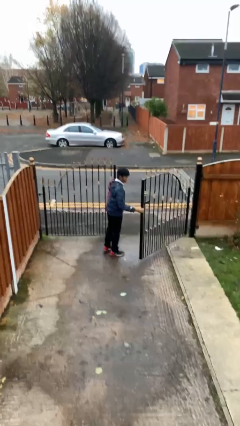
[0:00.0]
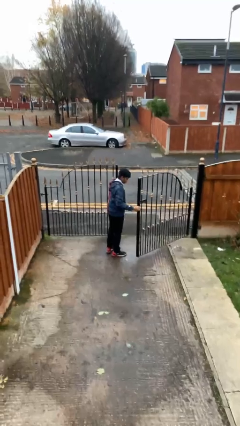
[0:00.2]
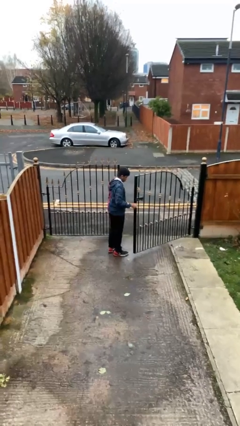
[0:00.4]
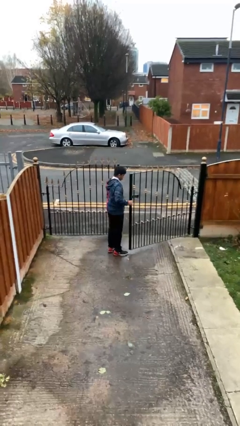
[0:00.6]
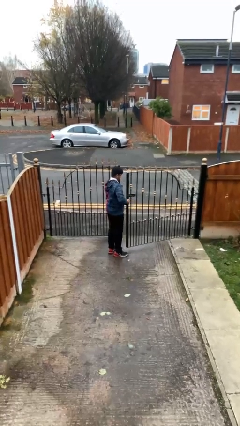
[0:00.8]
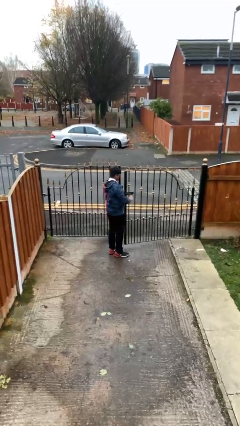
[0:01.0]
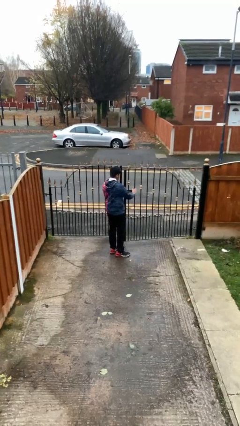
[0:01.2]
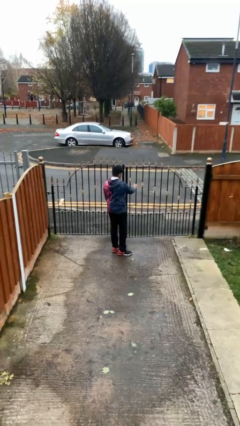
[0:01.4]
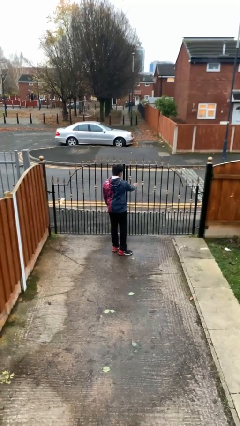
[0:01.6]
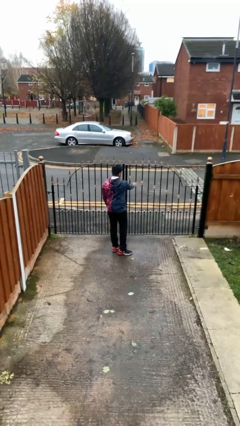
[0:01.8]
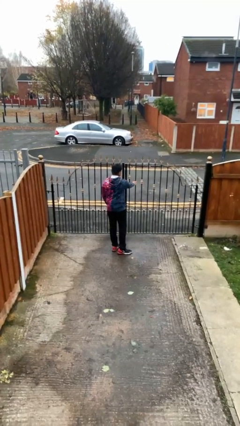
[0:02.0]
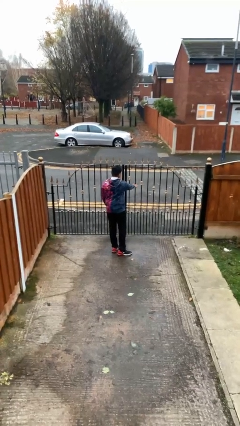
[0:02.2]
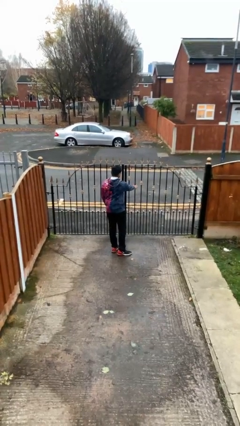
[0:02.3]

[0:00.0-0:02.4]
person closes facility door

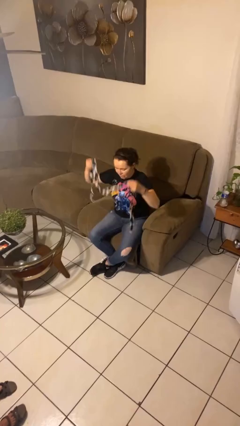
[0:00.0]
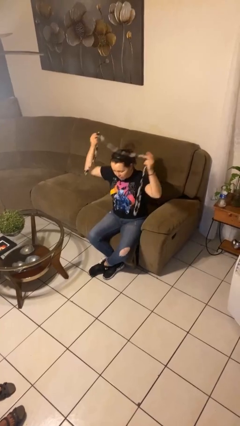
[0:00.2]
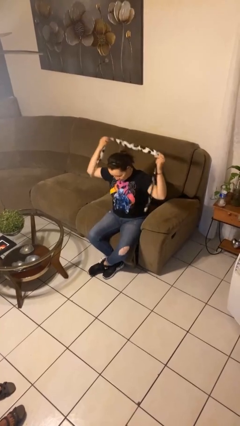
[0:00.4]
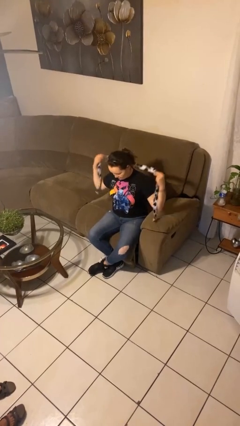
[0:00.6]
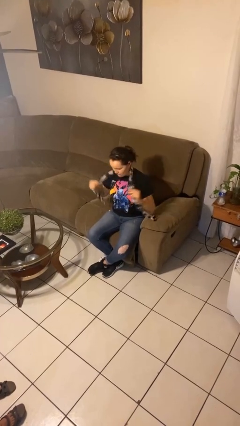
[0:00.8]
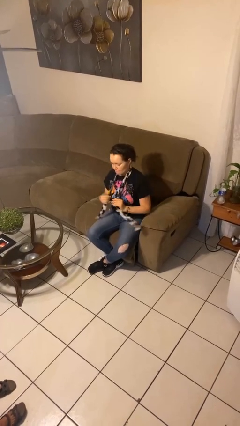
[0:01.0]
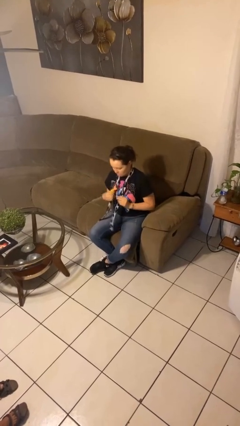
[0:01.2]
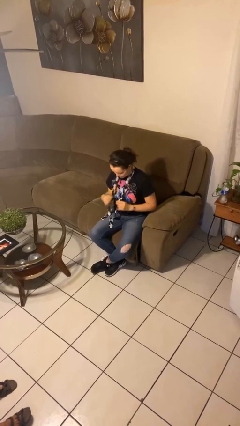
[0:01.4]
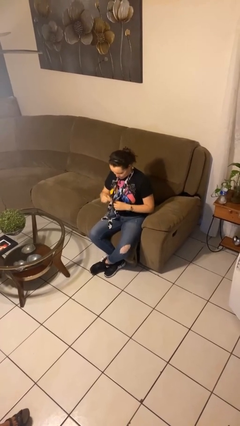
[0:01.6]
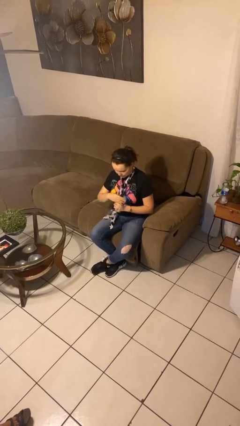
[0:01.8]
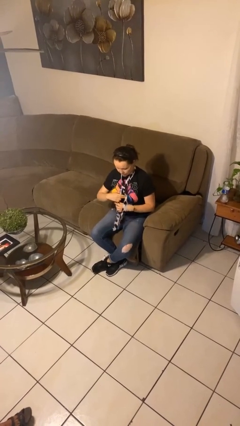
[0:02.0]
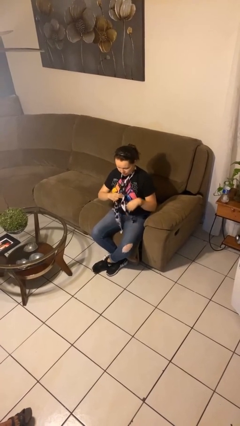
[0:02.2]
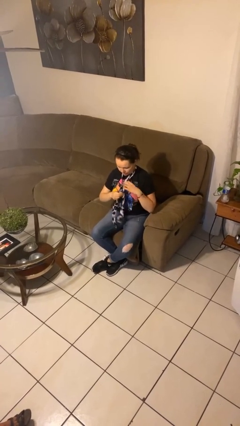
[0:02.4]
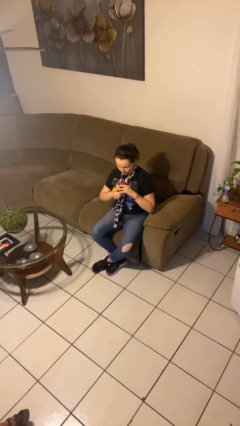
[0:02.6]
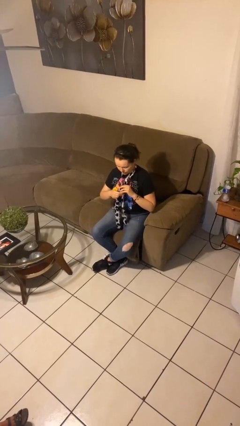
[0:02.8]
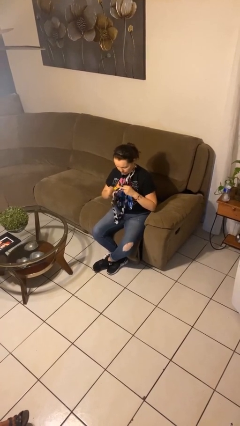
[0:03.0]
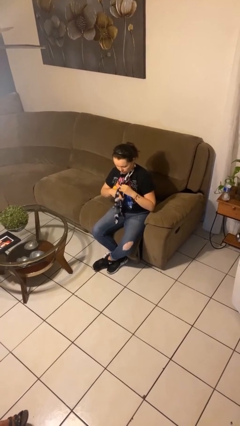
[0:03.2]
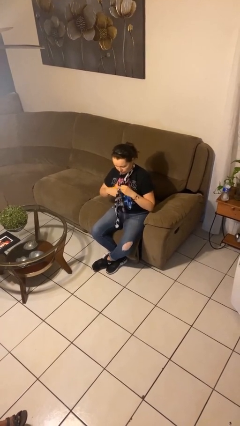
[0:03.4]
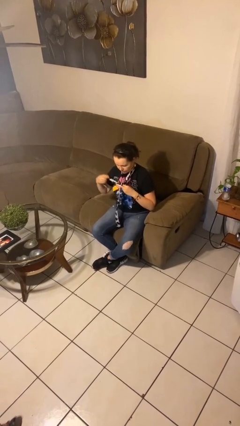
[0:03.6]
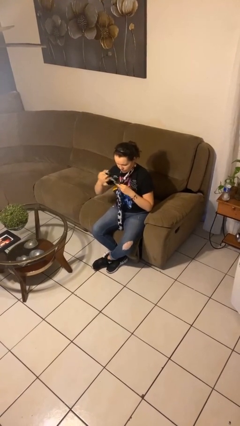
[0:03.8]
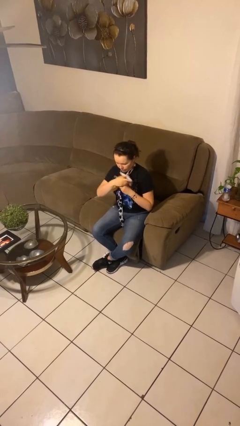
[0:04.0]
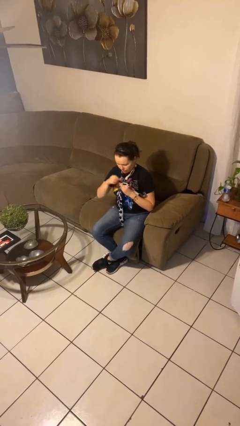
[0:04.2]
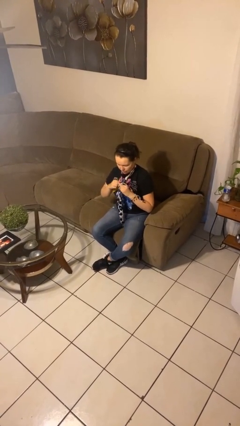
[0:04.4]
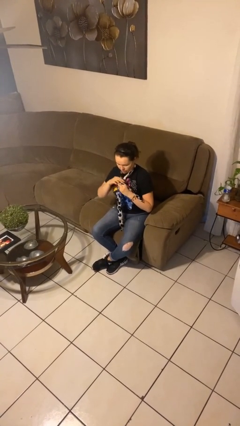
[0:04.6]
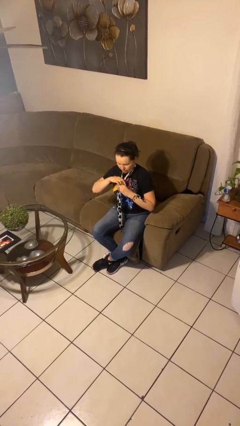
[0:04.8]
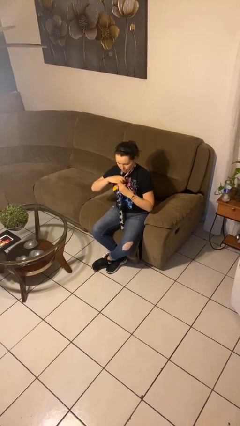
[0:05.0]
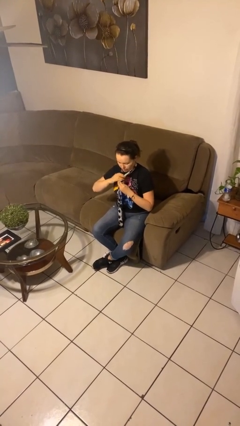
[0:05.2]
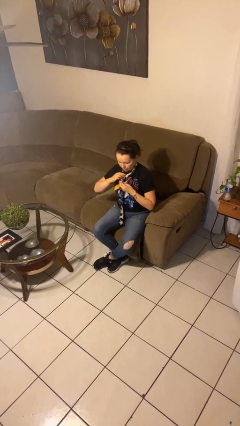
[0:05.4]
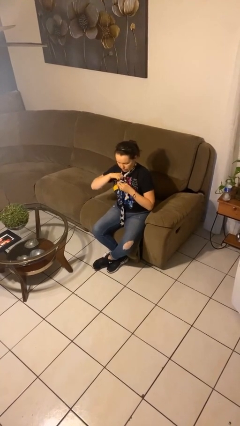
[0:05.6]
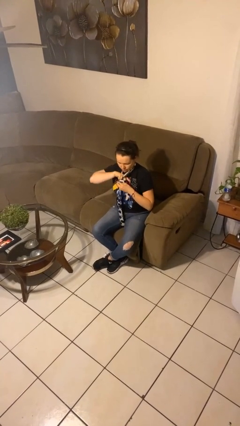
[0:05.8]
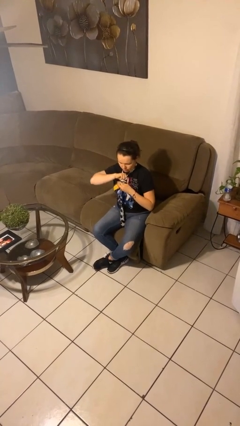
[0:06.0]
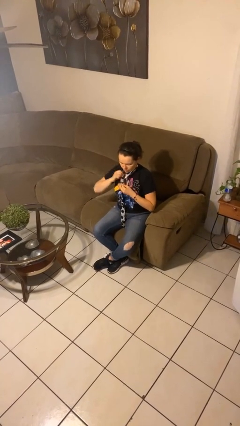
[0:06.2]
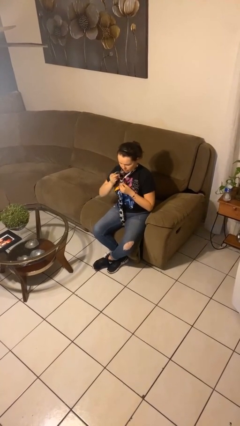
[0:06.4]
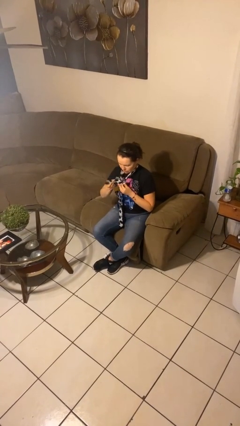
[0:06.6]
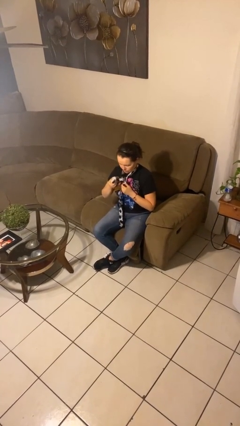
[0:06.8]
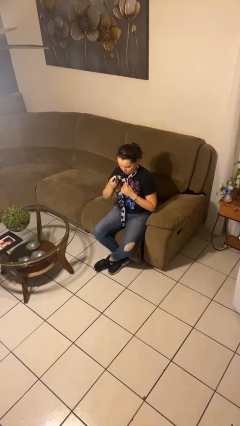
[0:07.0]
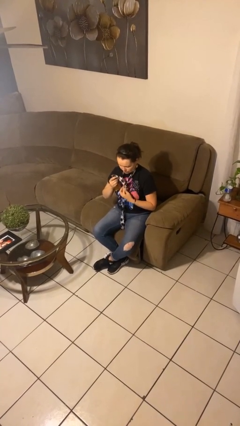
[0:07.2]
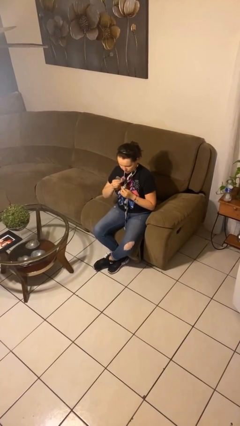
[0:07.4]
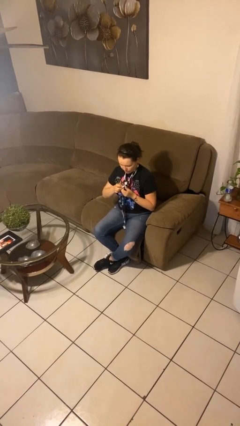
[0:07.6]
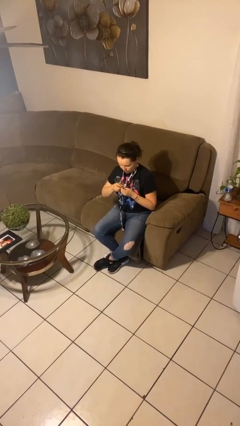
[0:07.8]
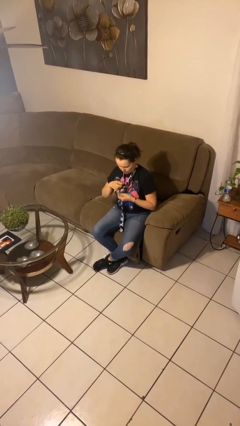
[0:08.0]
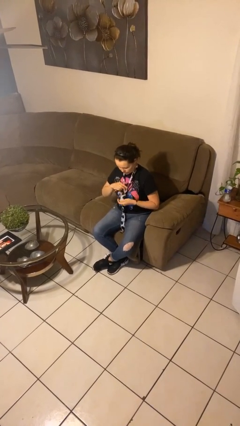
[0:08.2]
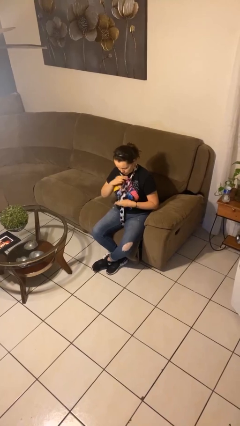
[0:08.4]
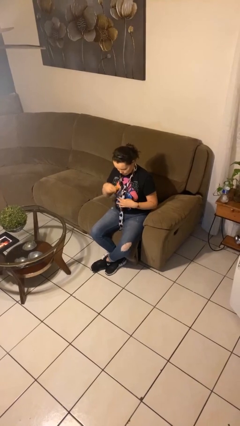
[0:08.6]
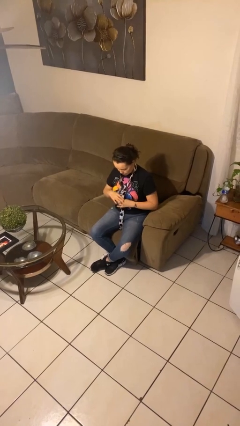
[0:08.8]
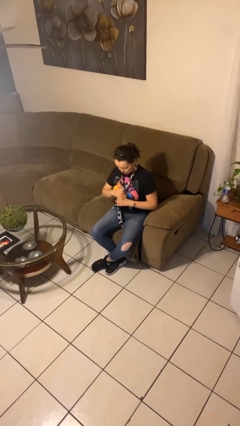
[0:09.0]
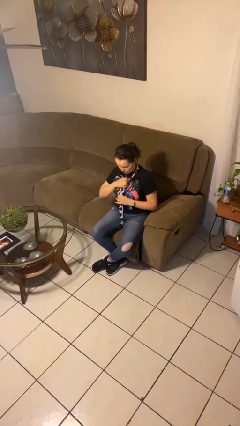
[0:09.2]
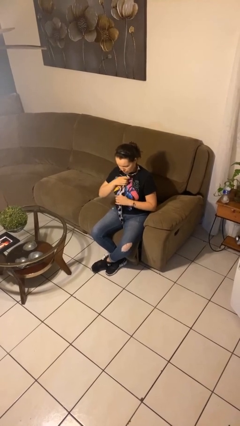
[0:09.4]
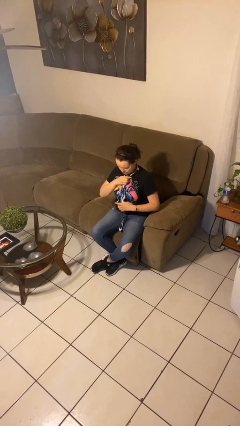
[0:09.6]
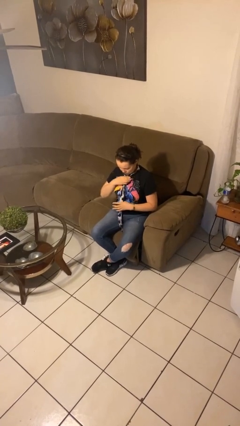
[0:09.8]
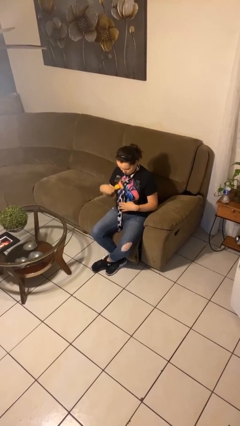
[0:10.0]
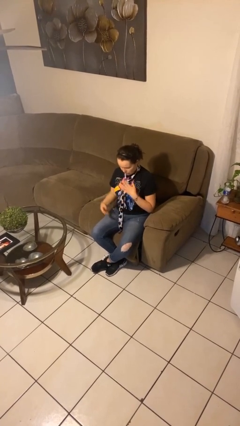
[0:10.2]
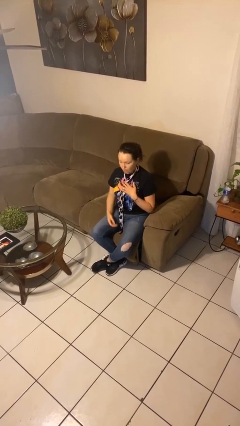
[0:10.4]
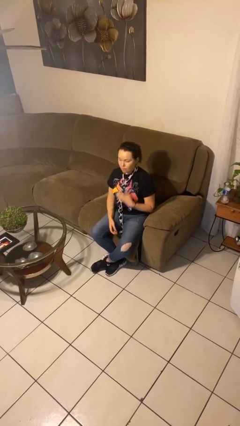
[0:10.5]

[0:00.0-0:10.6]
person puts on necktie

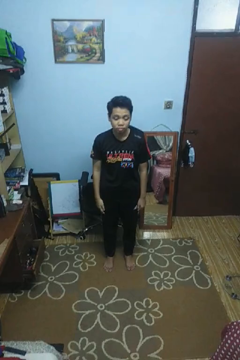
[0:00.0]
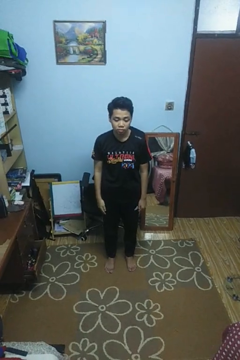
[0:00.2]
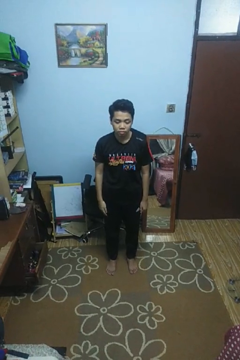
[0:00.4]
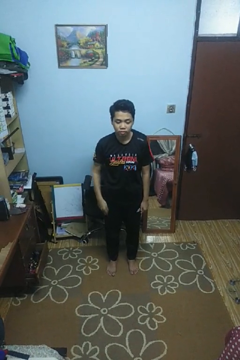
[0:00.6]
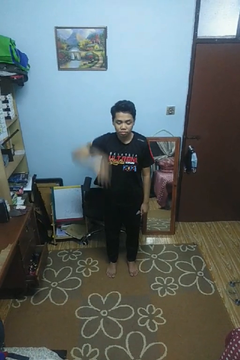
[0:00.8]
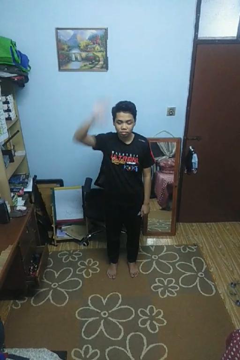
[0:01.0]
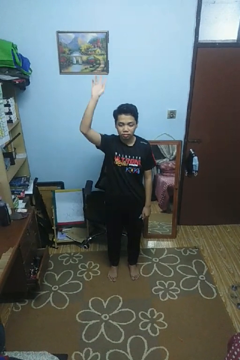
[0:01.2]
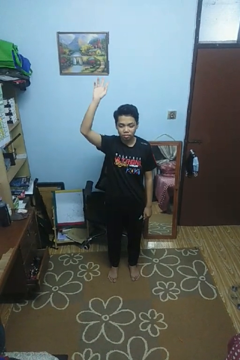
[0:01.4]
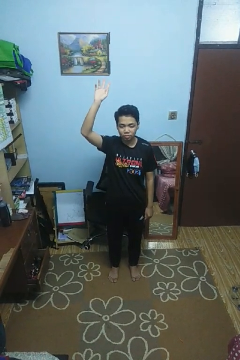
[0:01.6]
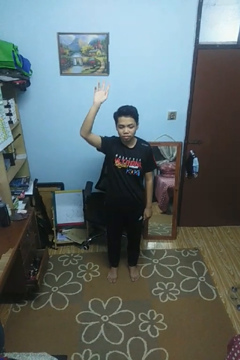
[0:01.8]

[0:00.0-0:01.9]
person gestures raise hand

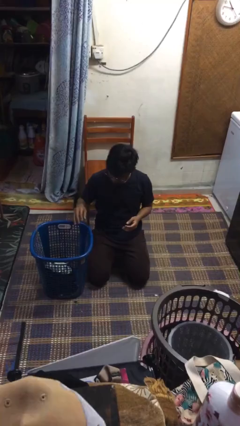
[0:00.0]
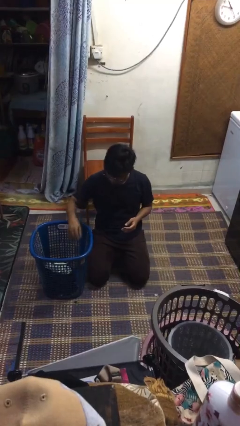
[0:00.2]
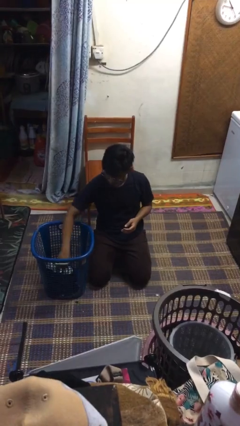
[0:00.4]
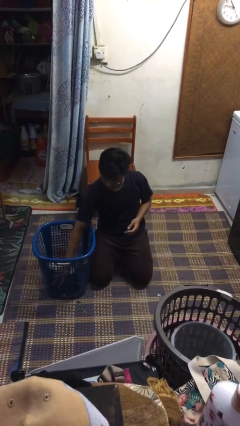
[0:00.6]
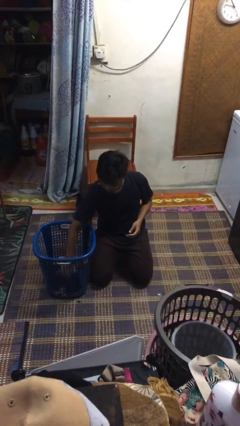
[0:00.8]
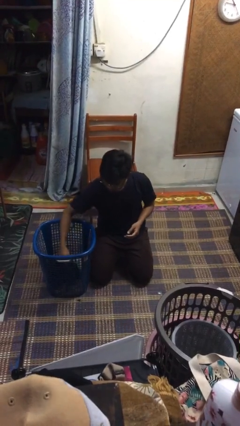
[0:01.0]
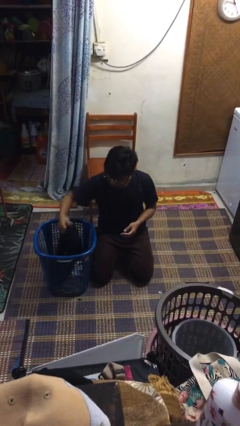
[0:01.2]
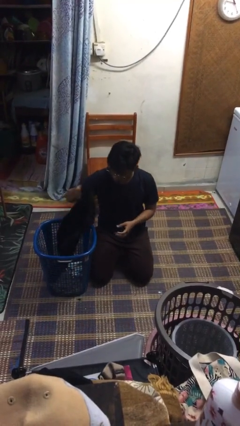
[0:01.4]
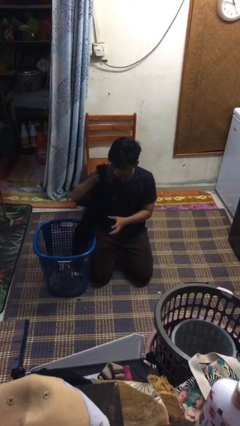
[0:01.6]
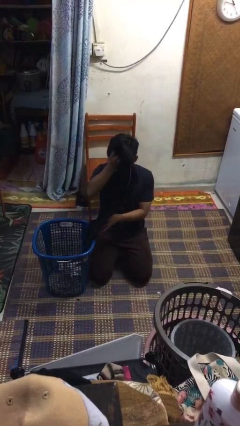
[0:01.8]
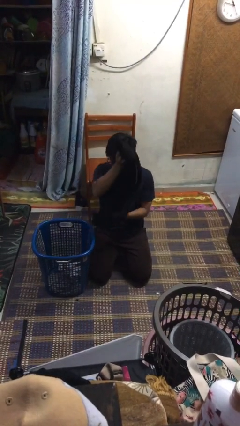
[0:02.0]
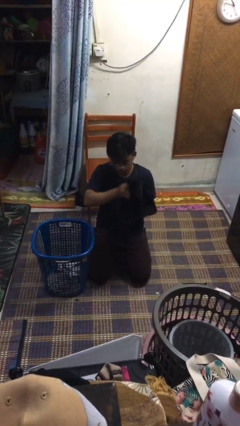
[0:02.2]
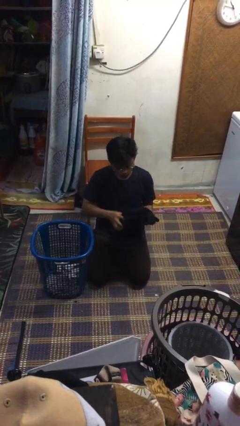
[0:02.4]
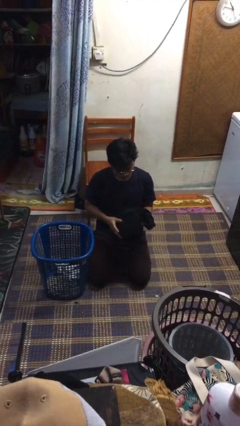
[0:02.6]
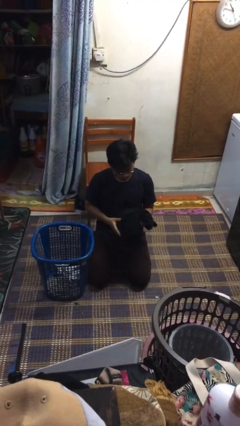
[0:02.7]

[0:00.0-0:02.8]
person takes object from basket

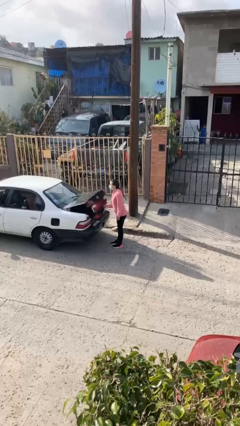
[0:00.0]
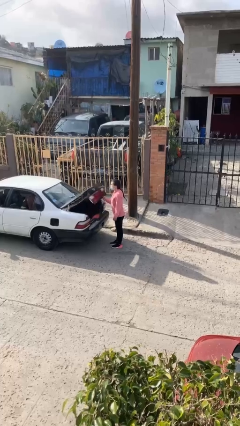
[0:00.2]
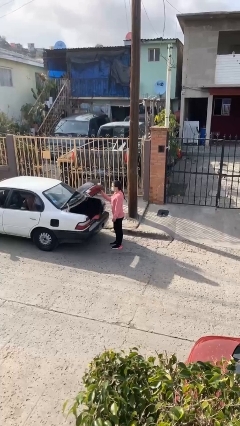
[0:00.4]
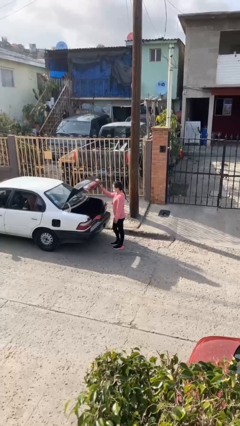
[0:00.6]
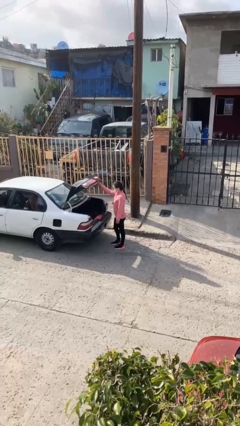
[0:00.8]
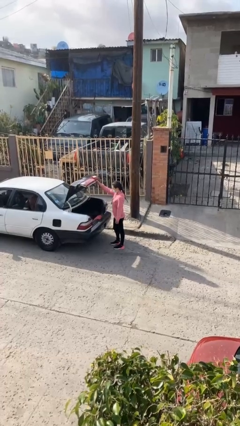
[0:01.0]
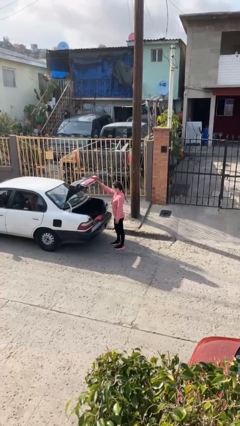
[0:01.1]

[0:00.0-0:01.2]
person opens car trunk
